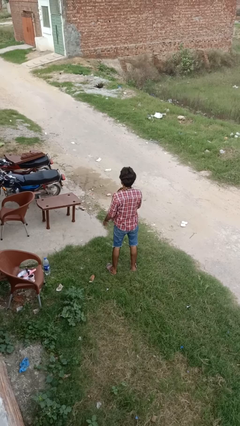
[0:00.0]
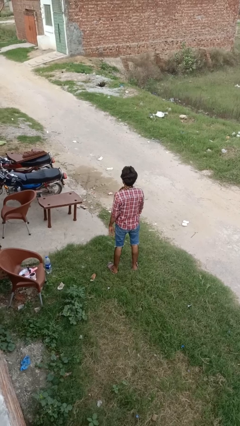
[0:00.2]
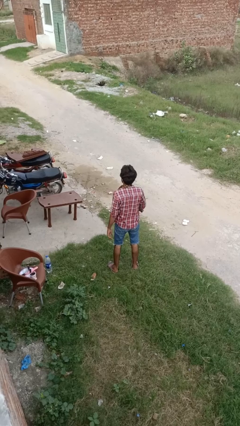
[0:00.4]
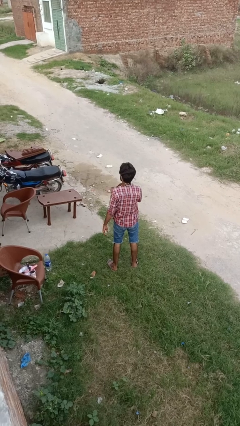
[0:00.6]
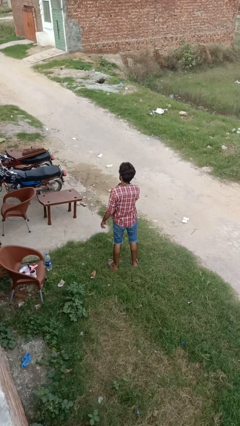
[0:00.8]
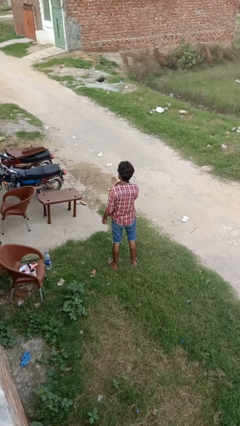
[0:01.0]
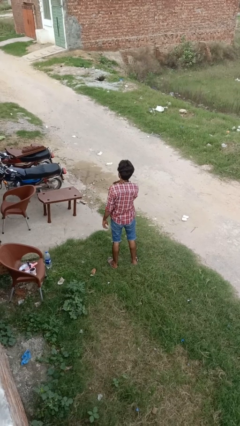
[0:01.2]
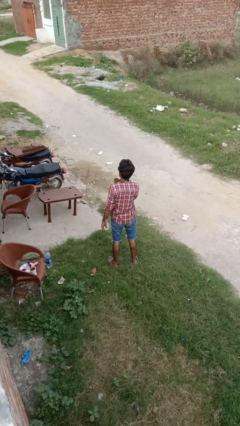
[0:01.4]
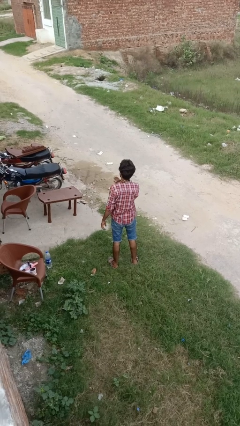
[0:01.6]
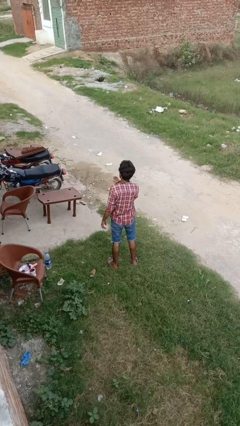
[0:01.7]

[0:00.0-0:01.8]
person drums on chest

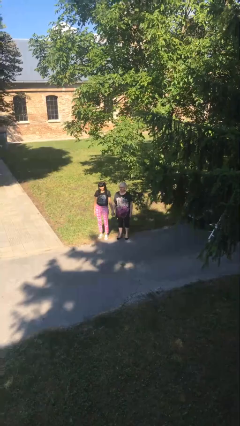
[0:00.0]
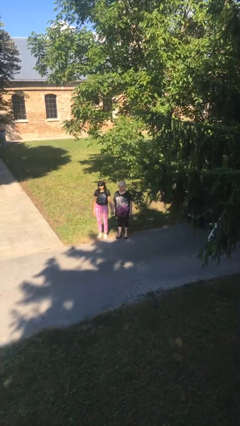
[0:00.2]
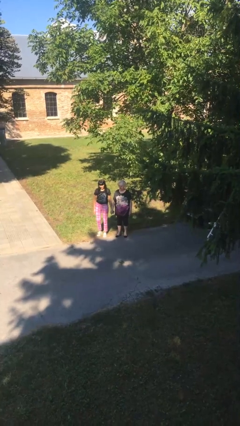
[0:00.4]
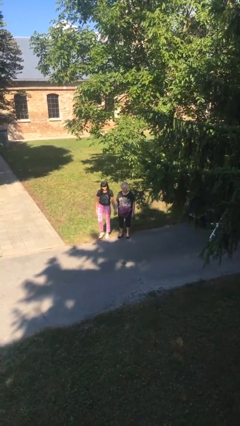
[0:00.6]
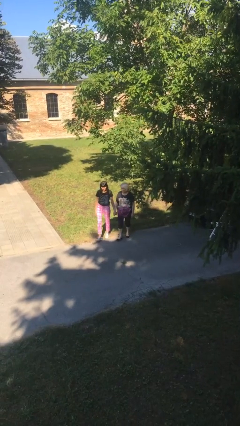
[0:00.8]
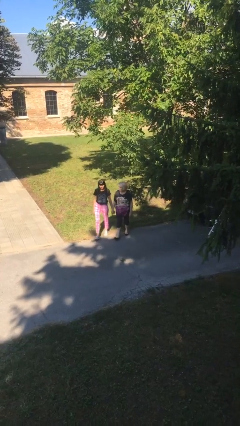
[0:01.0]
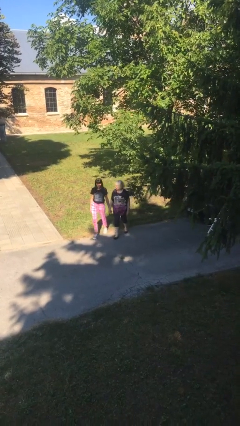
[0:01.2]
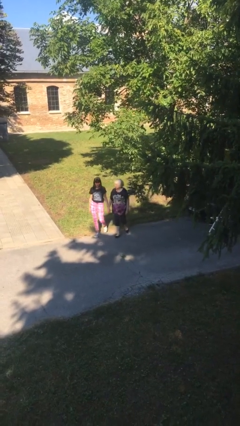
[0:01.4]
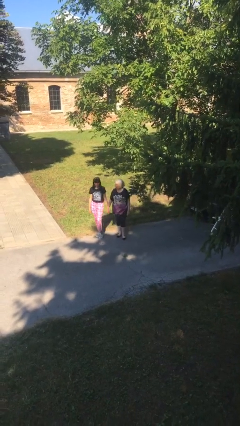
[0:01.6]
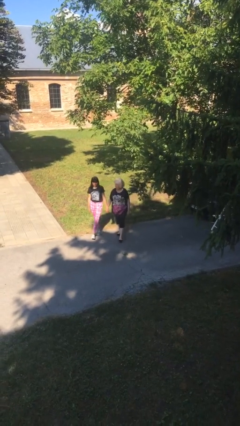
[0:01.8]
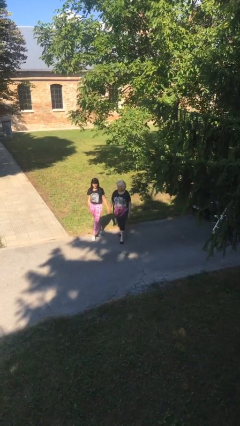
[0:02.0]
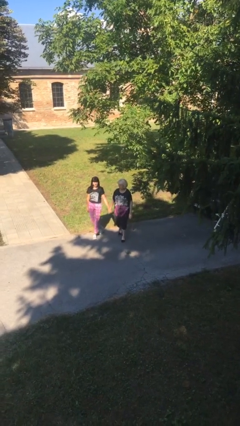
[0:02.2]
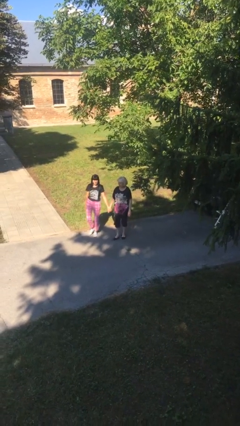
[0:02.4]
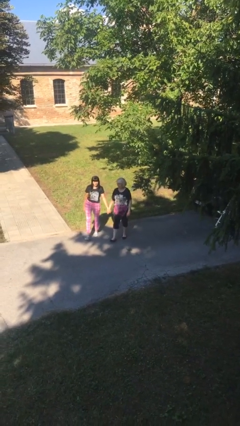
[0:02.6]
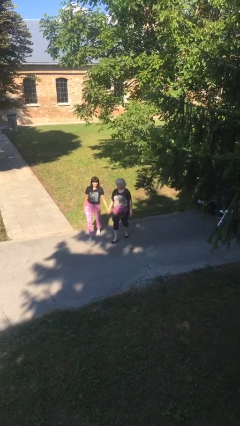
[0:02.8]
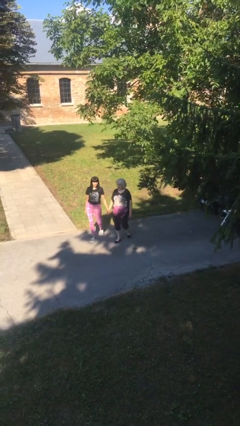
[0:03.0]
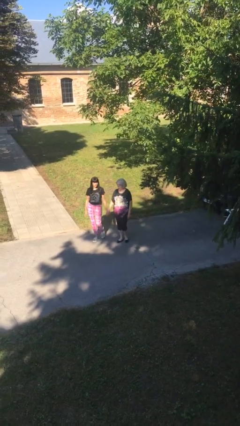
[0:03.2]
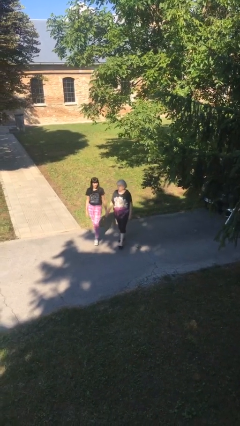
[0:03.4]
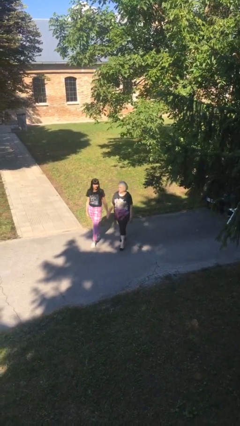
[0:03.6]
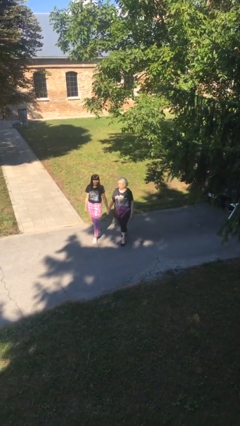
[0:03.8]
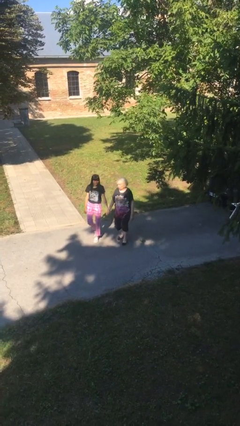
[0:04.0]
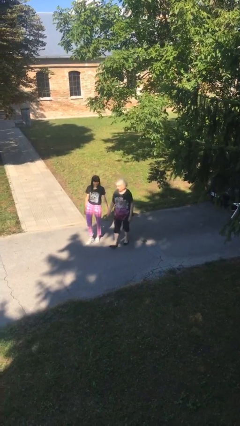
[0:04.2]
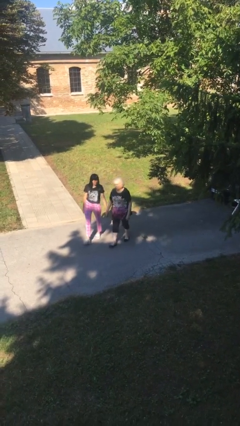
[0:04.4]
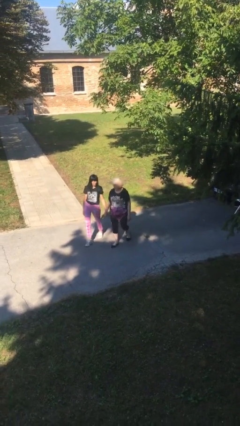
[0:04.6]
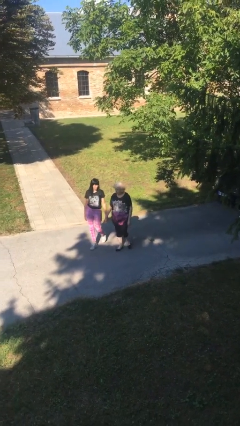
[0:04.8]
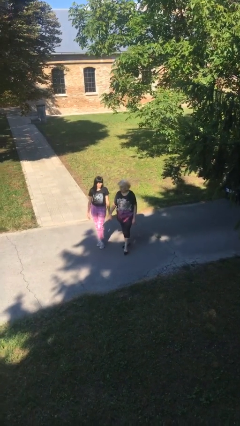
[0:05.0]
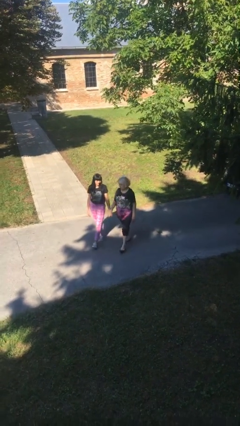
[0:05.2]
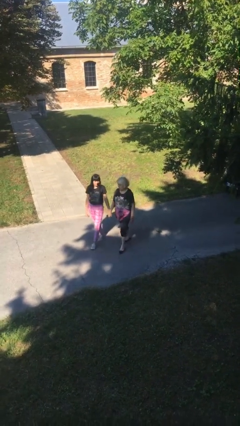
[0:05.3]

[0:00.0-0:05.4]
person holds hand

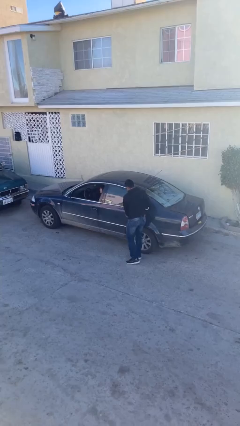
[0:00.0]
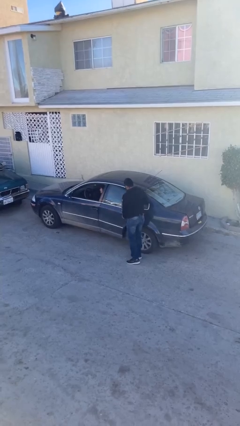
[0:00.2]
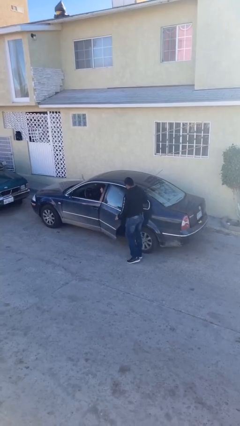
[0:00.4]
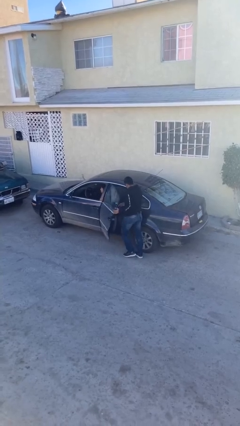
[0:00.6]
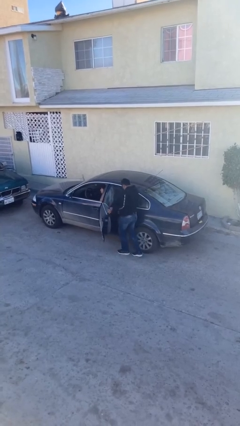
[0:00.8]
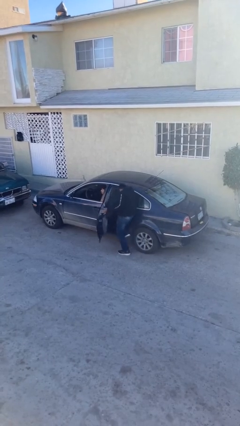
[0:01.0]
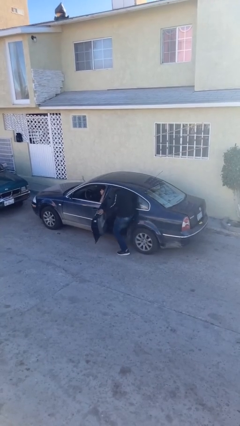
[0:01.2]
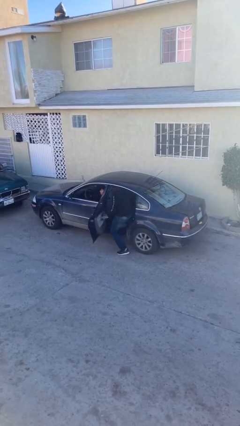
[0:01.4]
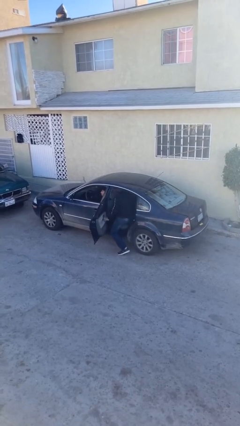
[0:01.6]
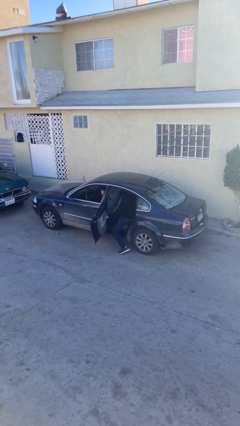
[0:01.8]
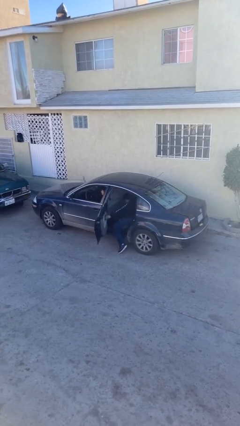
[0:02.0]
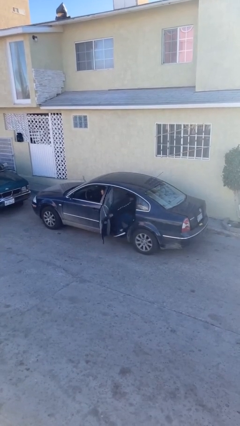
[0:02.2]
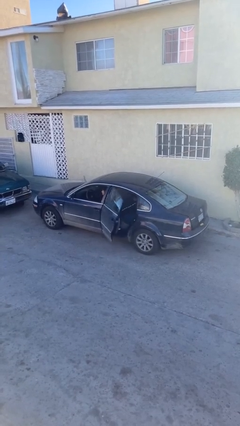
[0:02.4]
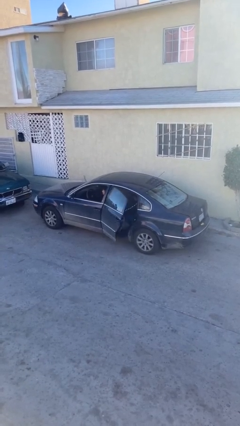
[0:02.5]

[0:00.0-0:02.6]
car picks up person

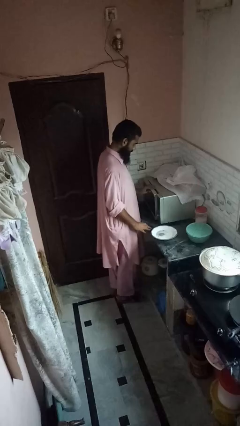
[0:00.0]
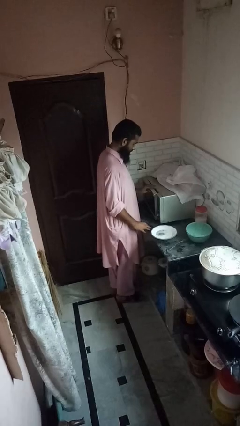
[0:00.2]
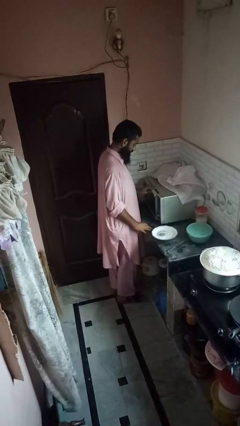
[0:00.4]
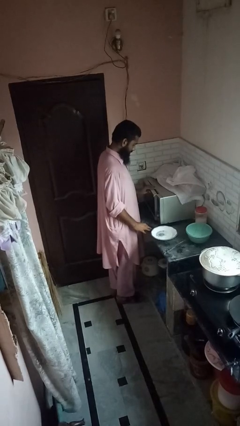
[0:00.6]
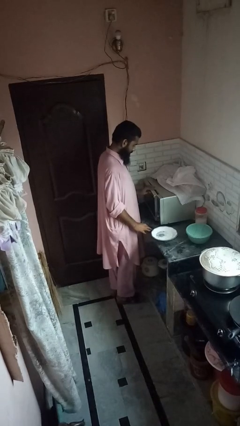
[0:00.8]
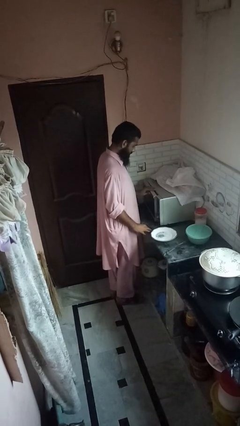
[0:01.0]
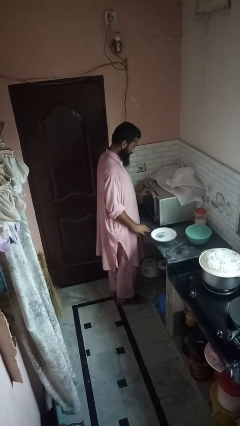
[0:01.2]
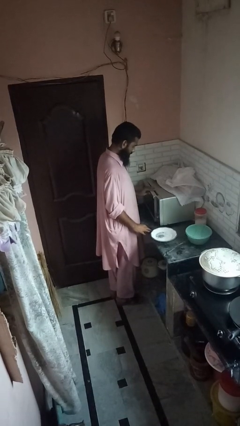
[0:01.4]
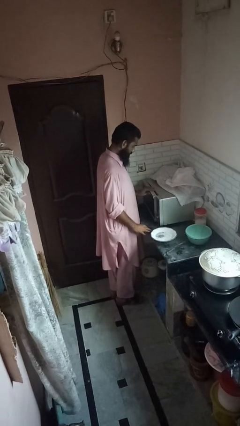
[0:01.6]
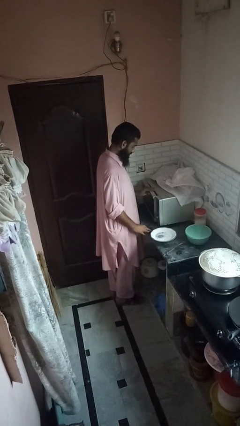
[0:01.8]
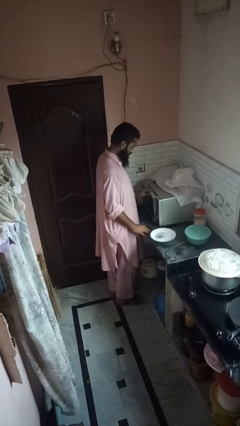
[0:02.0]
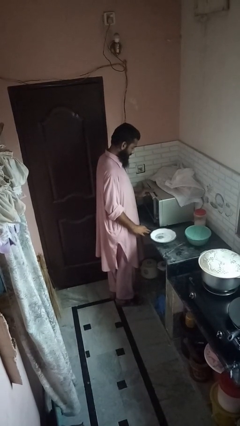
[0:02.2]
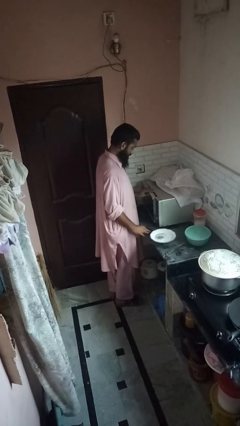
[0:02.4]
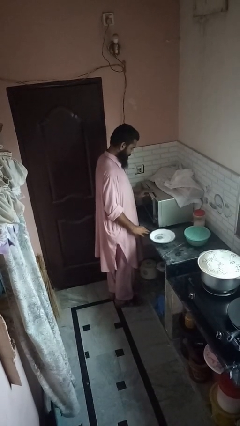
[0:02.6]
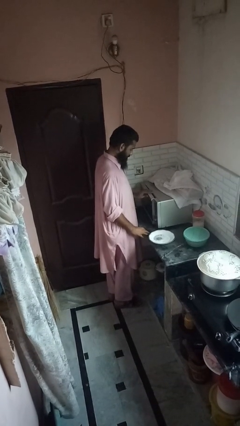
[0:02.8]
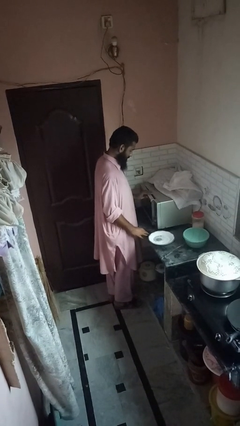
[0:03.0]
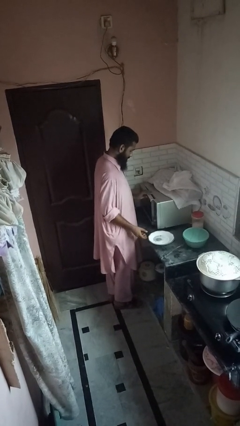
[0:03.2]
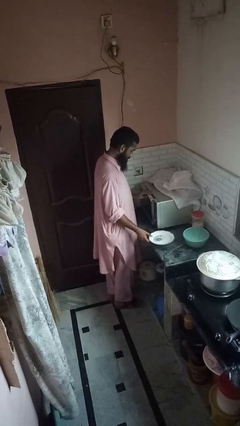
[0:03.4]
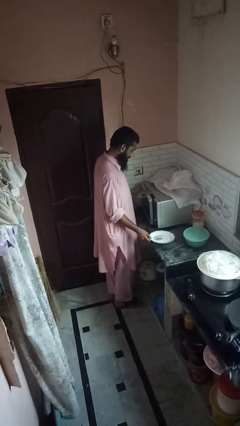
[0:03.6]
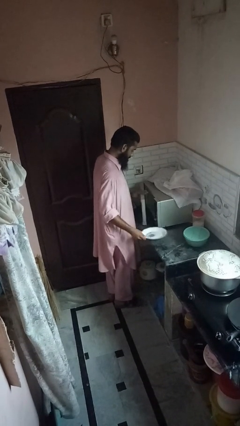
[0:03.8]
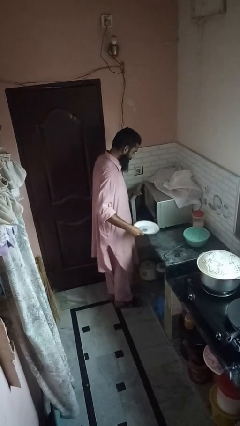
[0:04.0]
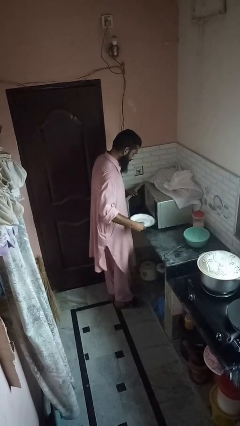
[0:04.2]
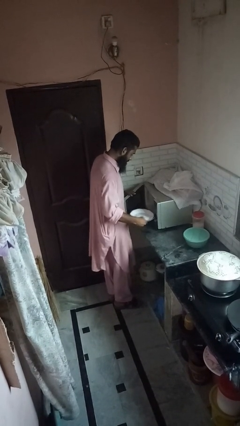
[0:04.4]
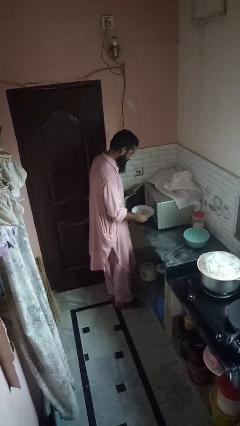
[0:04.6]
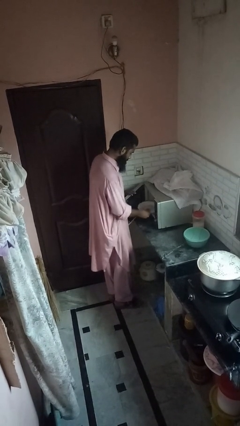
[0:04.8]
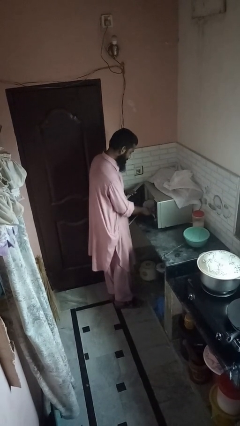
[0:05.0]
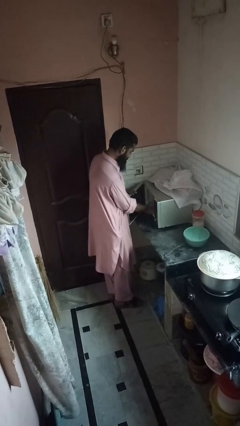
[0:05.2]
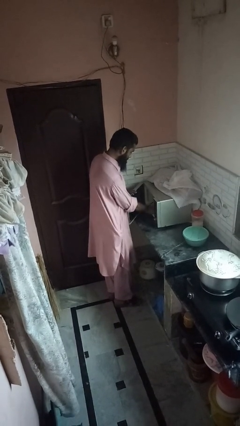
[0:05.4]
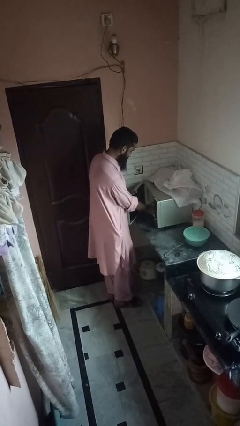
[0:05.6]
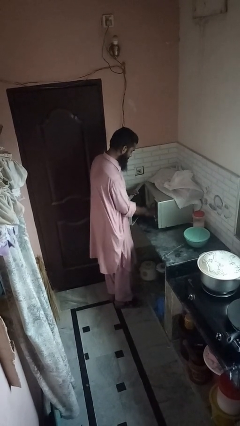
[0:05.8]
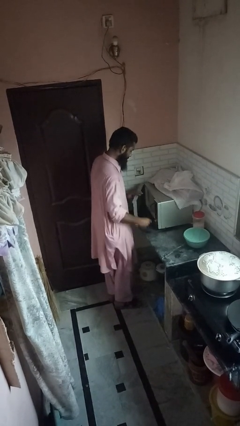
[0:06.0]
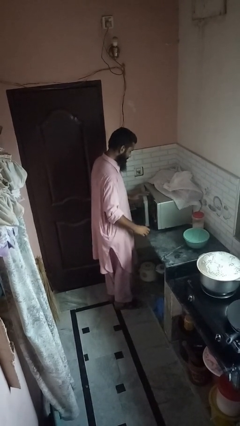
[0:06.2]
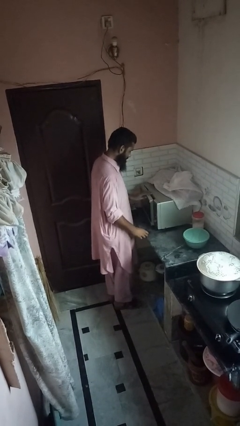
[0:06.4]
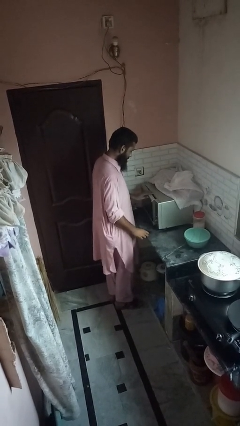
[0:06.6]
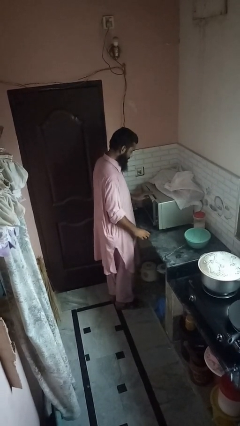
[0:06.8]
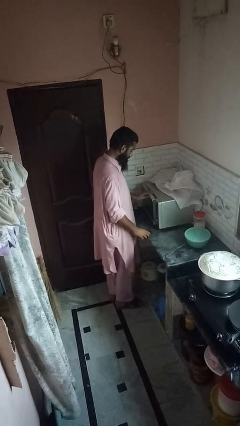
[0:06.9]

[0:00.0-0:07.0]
person puts object into oven

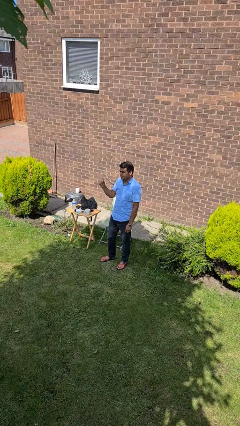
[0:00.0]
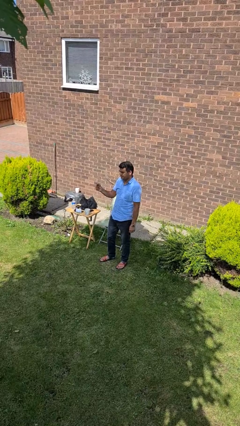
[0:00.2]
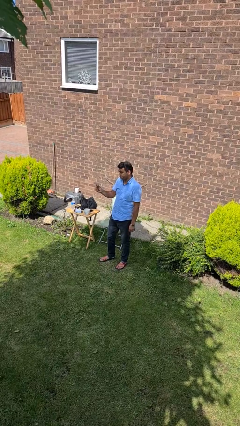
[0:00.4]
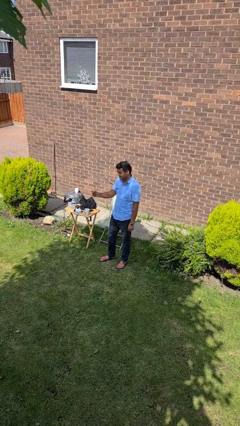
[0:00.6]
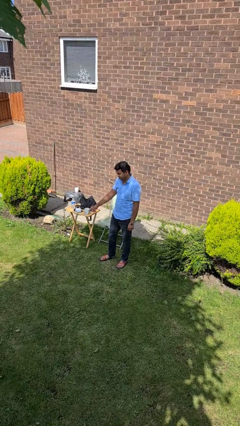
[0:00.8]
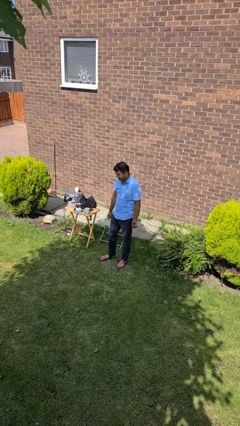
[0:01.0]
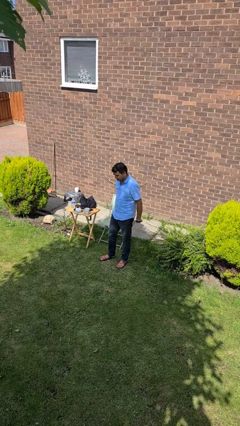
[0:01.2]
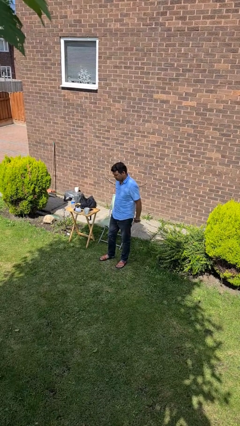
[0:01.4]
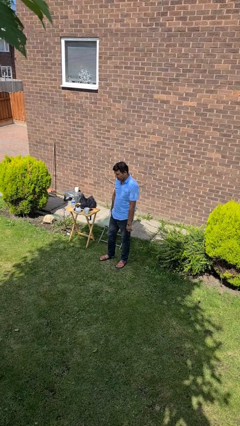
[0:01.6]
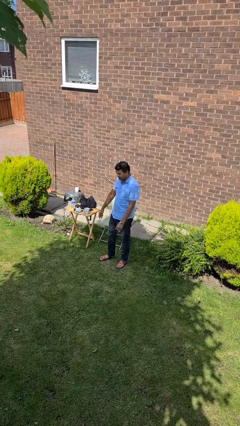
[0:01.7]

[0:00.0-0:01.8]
person snaps fingers
